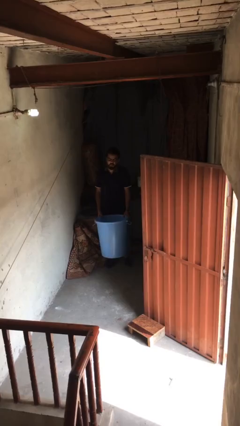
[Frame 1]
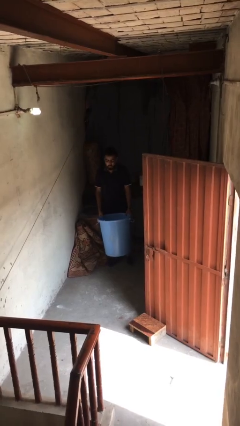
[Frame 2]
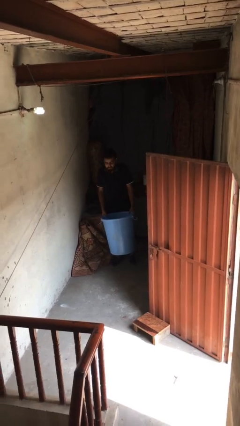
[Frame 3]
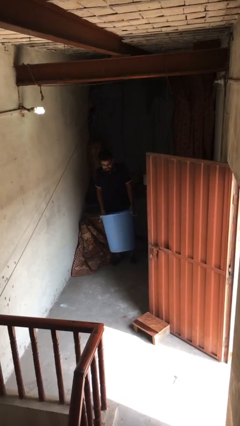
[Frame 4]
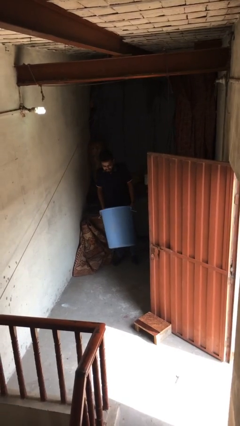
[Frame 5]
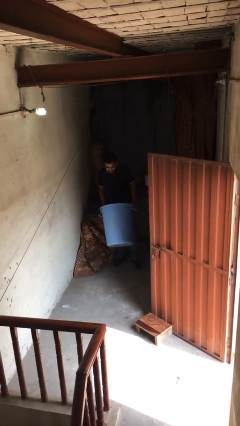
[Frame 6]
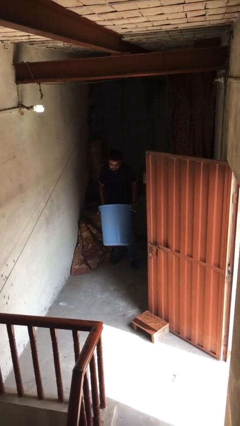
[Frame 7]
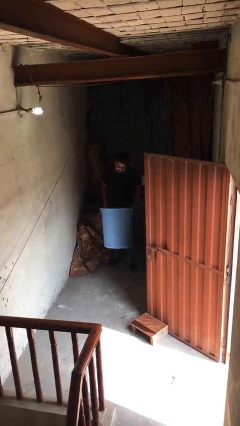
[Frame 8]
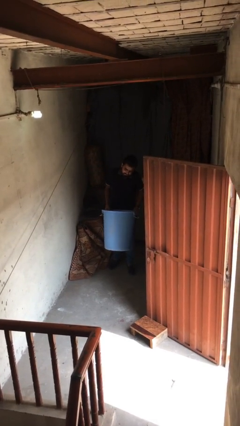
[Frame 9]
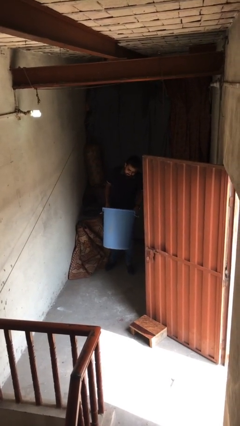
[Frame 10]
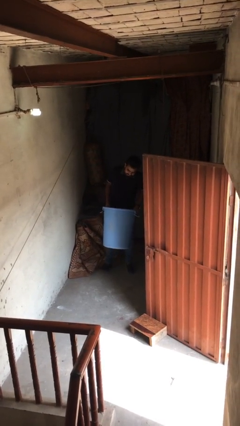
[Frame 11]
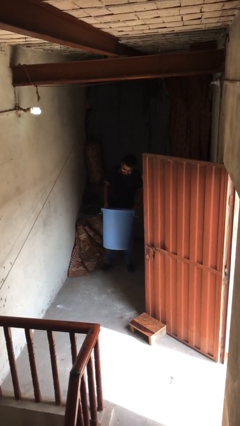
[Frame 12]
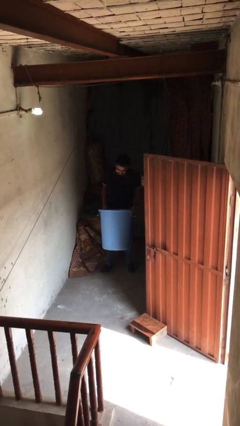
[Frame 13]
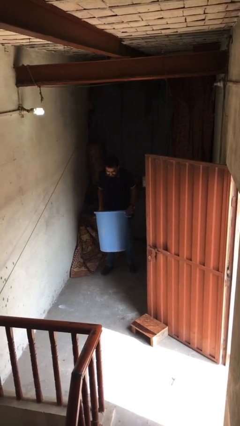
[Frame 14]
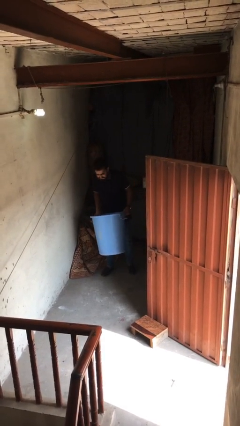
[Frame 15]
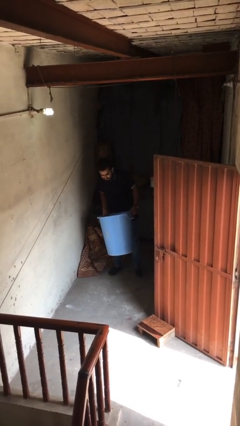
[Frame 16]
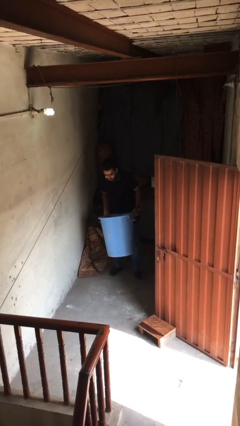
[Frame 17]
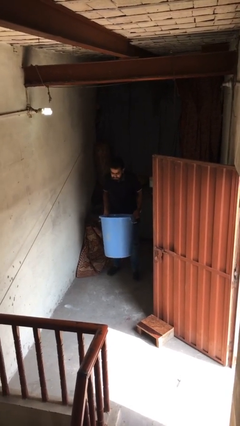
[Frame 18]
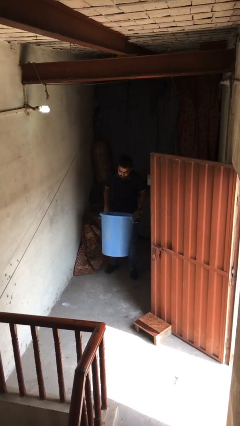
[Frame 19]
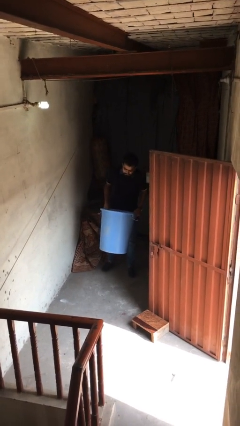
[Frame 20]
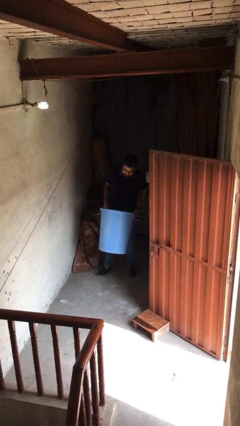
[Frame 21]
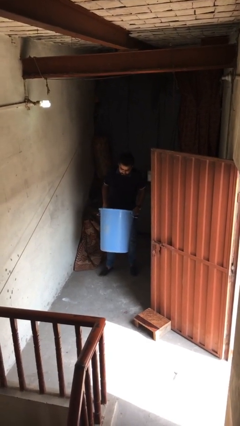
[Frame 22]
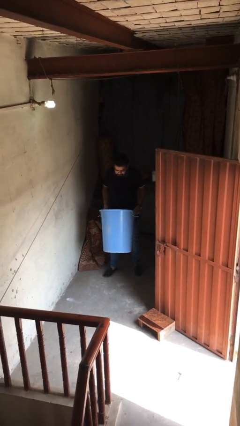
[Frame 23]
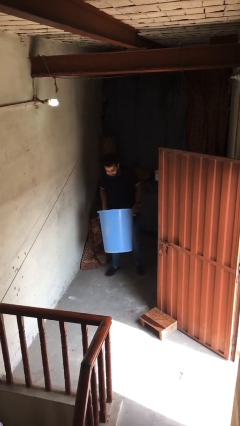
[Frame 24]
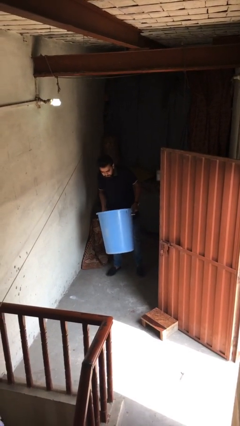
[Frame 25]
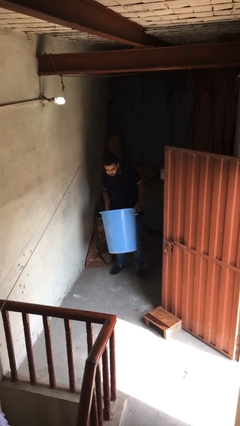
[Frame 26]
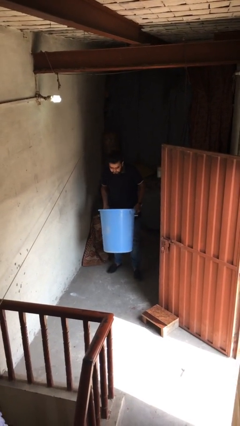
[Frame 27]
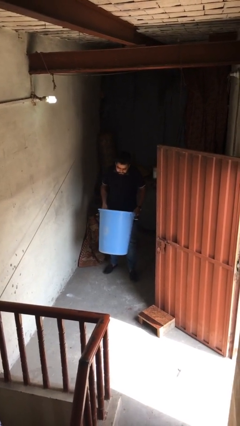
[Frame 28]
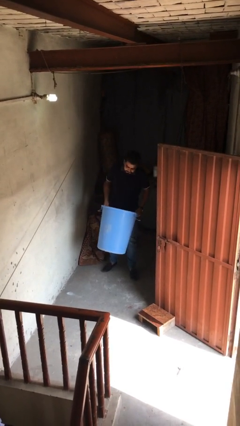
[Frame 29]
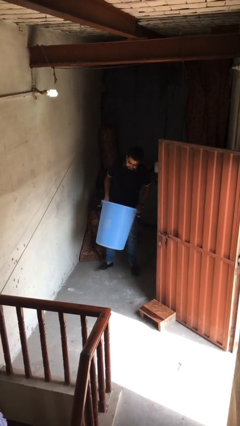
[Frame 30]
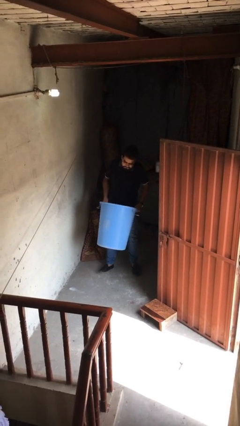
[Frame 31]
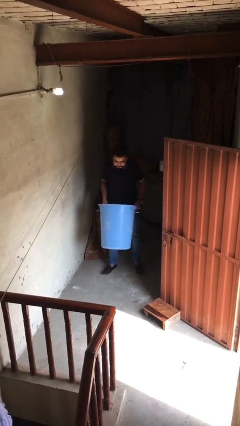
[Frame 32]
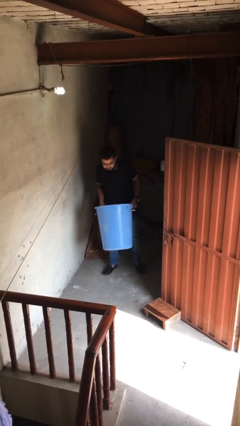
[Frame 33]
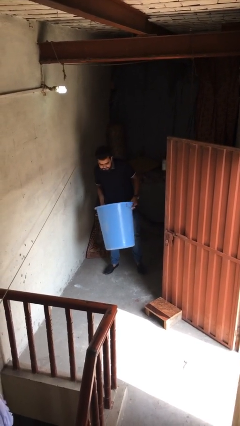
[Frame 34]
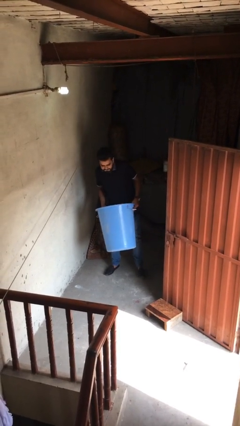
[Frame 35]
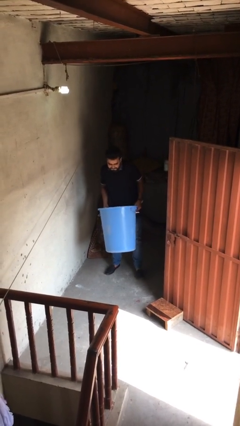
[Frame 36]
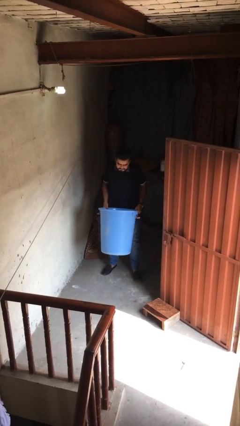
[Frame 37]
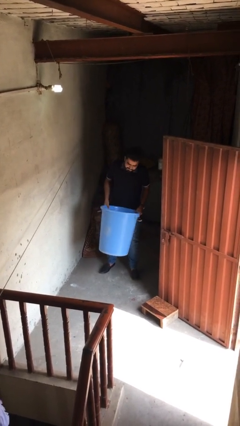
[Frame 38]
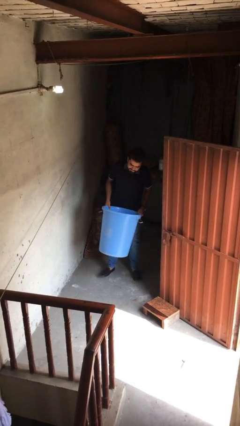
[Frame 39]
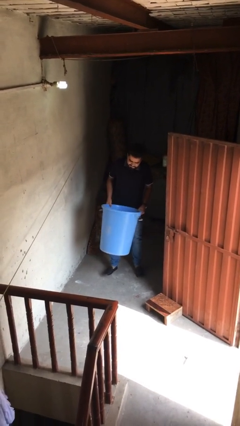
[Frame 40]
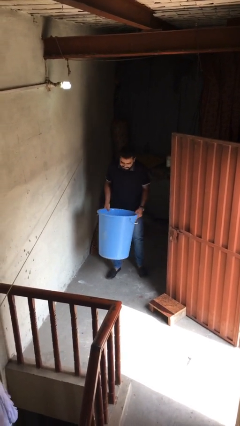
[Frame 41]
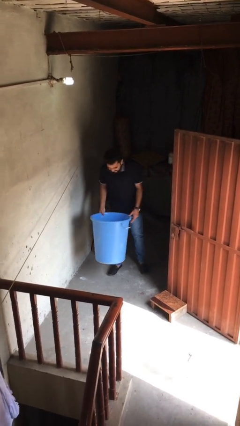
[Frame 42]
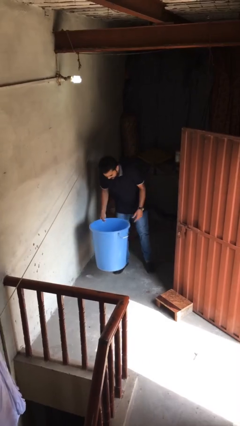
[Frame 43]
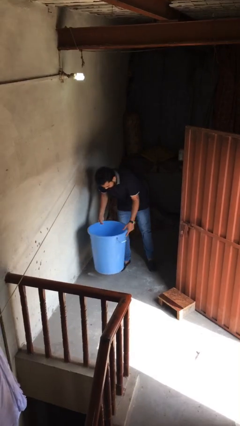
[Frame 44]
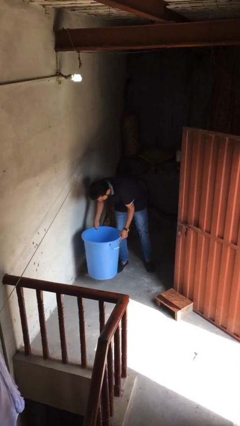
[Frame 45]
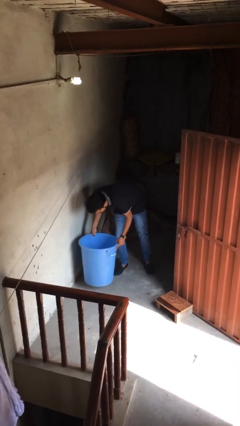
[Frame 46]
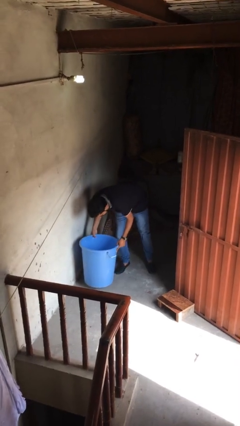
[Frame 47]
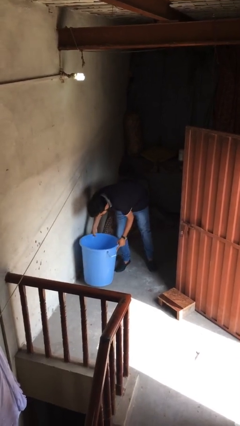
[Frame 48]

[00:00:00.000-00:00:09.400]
person carries heavy object

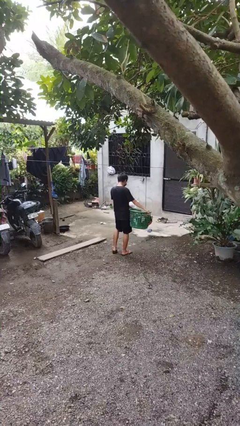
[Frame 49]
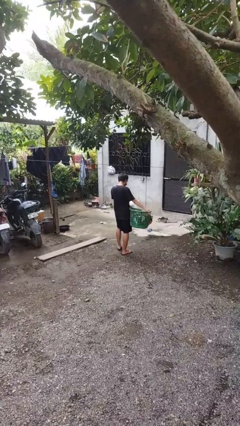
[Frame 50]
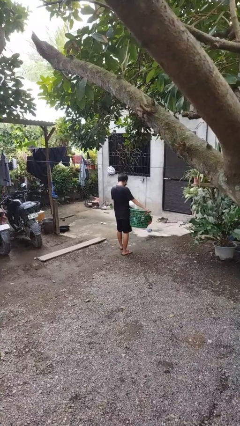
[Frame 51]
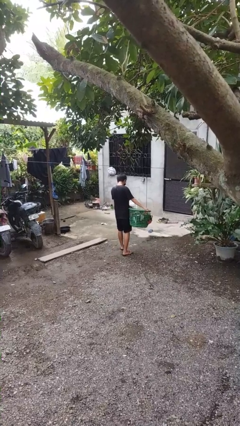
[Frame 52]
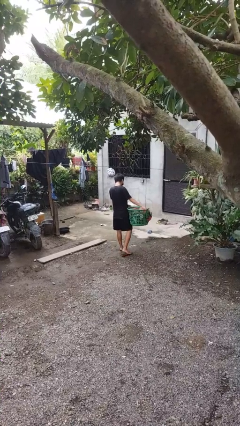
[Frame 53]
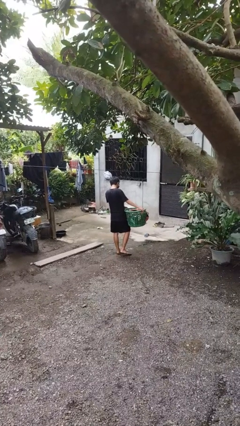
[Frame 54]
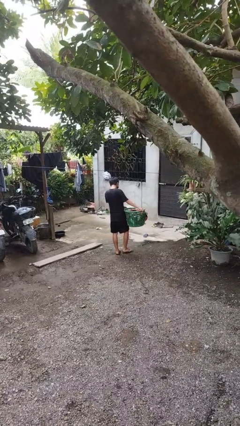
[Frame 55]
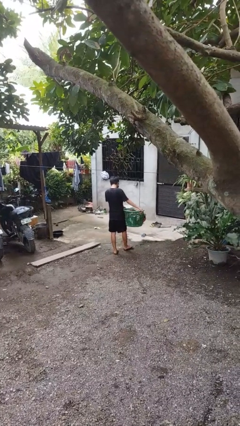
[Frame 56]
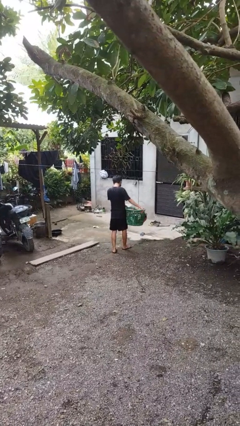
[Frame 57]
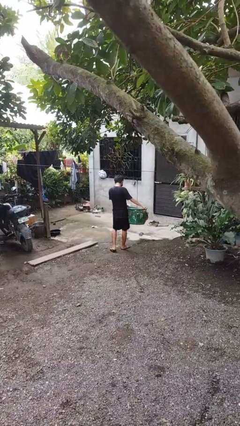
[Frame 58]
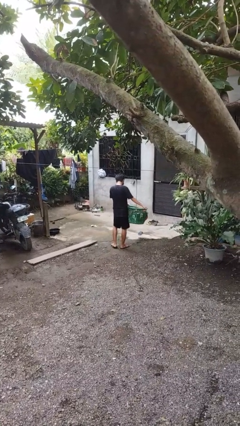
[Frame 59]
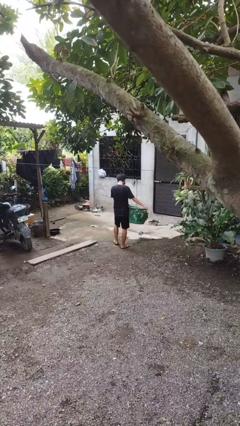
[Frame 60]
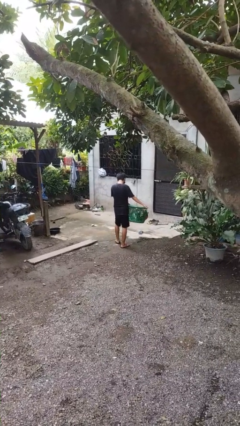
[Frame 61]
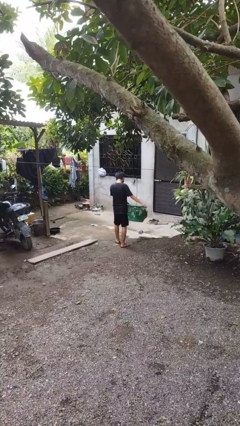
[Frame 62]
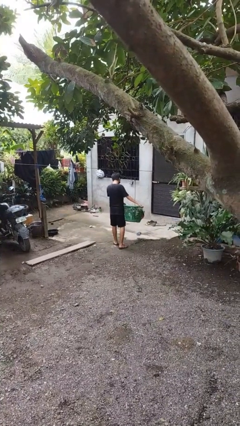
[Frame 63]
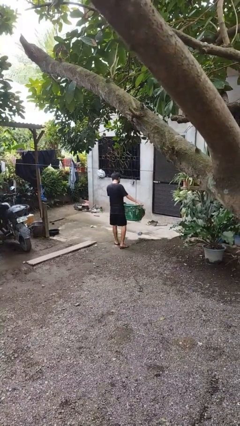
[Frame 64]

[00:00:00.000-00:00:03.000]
person carries laundry basket

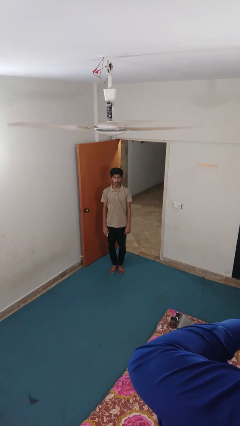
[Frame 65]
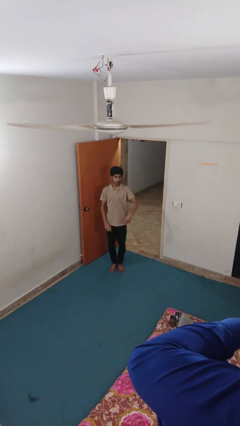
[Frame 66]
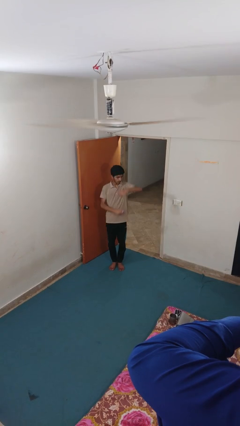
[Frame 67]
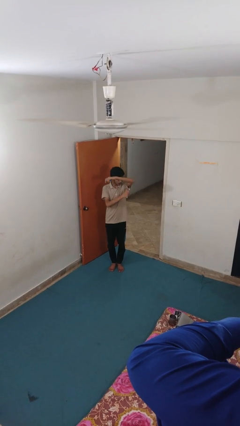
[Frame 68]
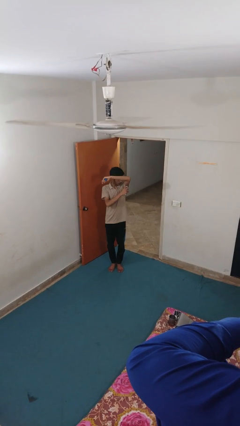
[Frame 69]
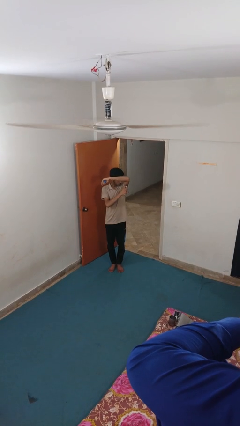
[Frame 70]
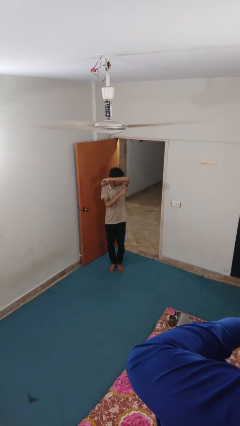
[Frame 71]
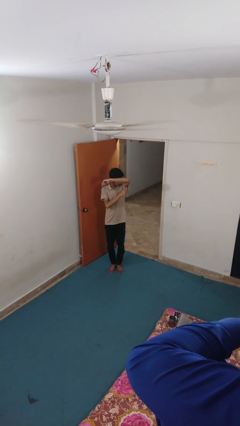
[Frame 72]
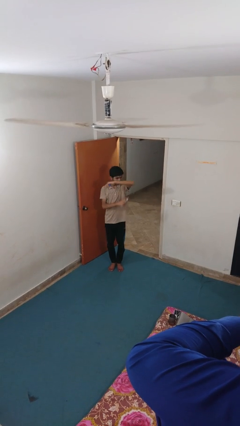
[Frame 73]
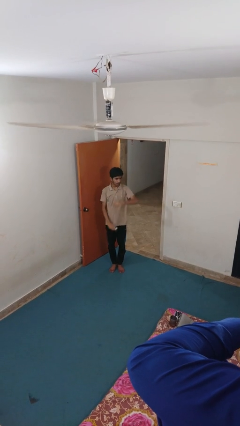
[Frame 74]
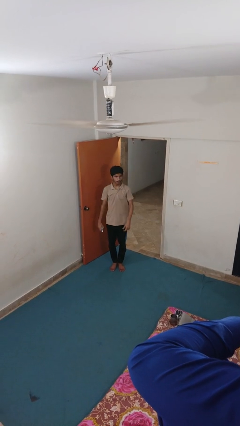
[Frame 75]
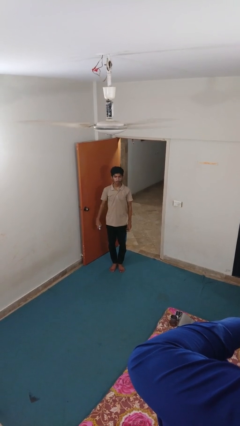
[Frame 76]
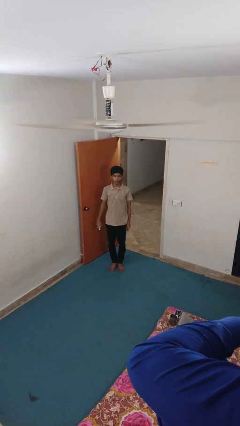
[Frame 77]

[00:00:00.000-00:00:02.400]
person applies deodorant

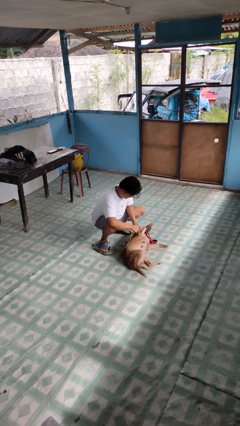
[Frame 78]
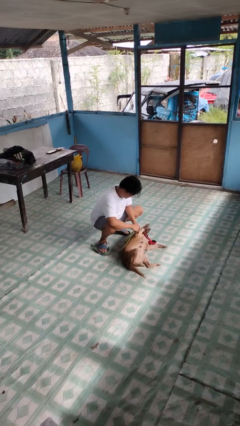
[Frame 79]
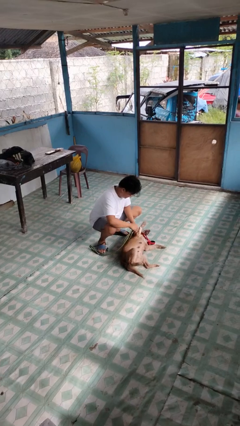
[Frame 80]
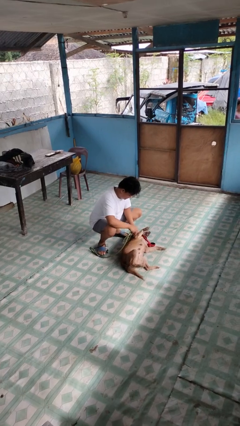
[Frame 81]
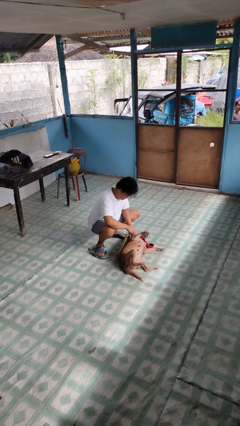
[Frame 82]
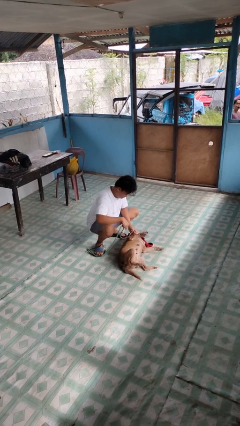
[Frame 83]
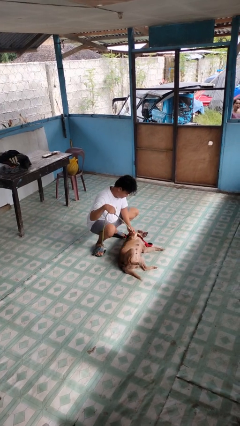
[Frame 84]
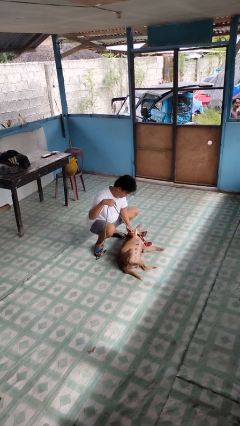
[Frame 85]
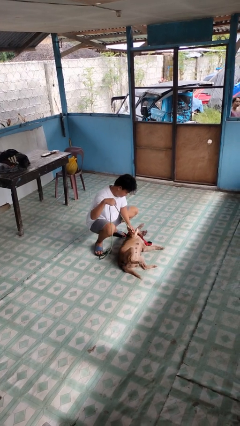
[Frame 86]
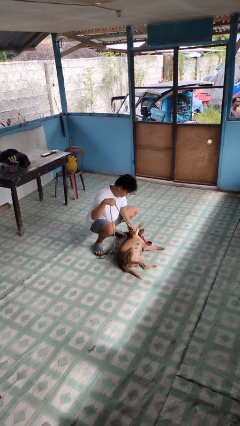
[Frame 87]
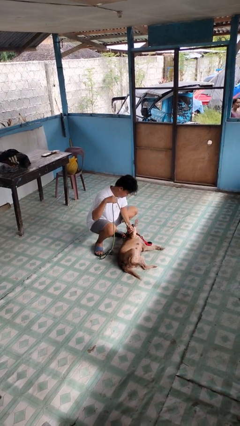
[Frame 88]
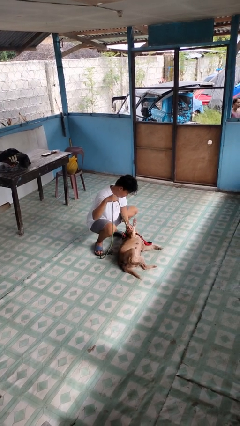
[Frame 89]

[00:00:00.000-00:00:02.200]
person attaches leash to dog

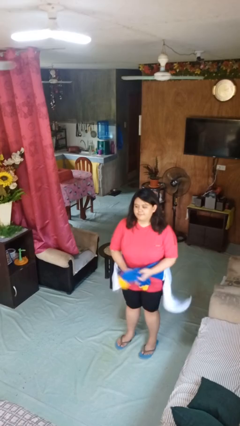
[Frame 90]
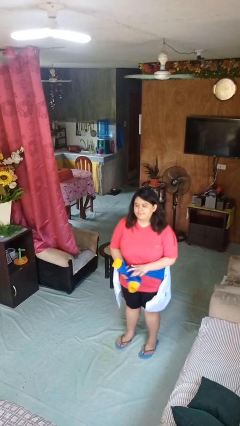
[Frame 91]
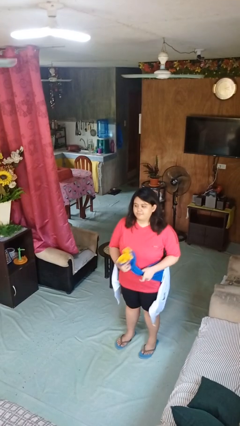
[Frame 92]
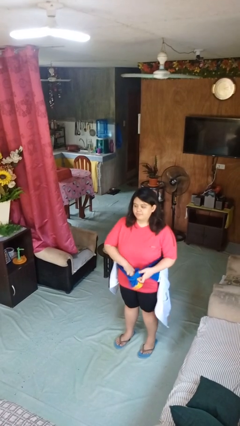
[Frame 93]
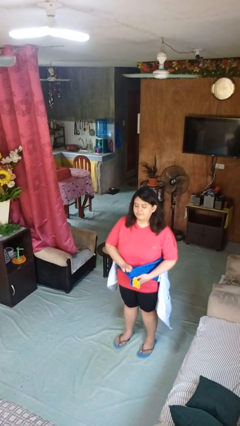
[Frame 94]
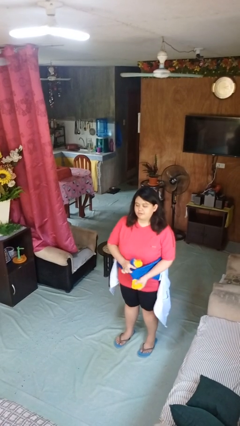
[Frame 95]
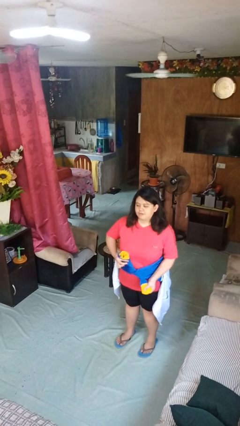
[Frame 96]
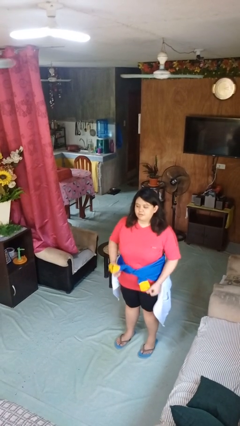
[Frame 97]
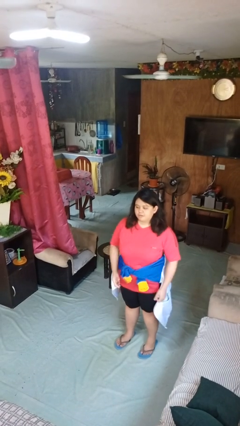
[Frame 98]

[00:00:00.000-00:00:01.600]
person ties jacket around waist
